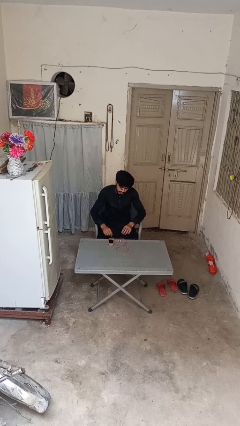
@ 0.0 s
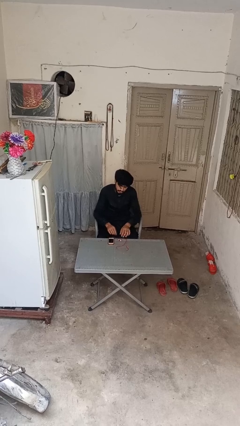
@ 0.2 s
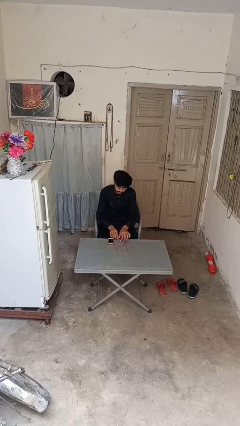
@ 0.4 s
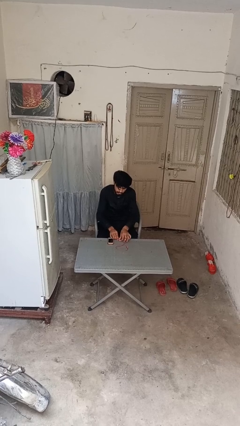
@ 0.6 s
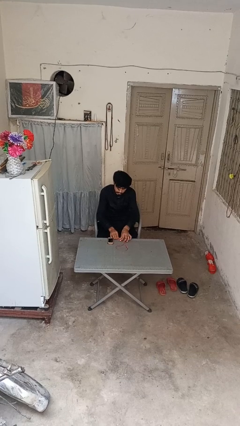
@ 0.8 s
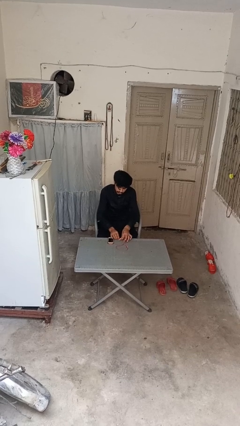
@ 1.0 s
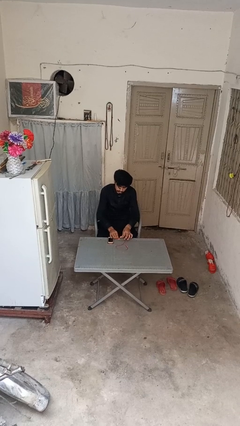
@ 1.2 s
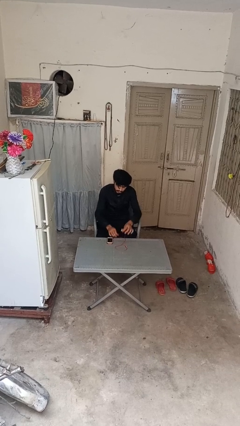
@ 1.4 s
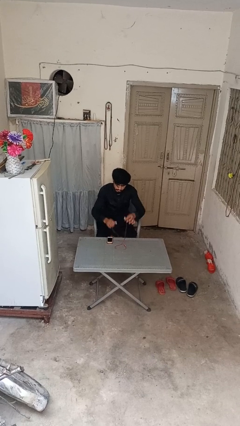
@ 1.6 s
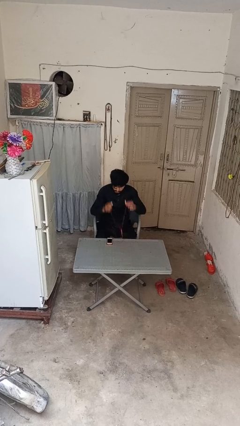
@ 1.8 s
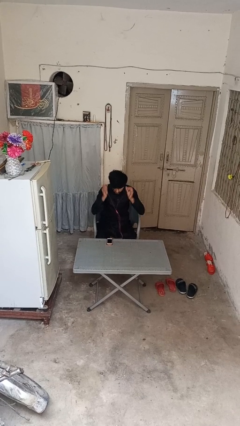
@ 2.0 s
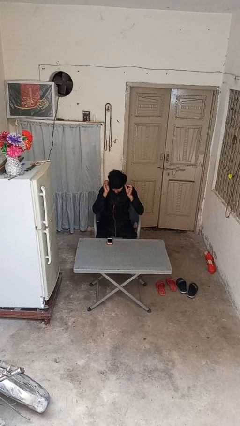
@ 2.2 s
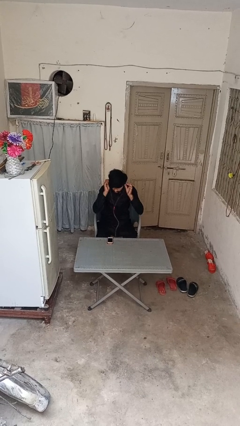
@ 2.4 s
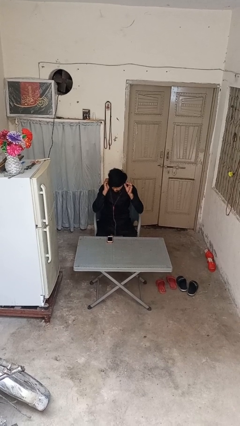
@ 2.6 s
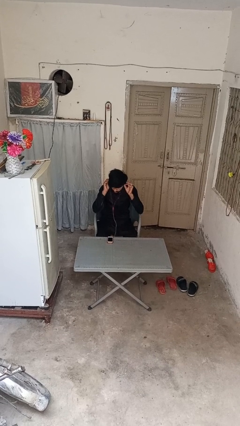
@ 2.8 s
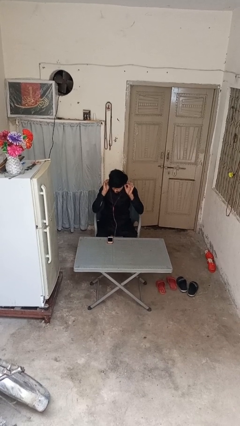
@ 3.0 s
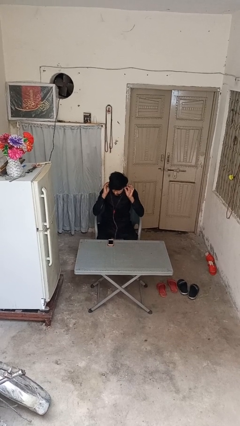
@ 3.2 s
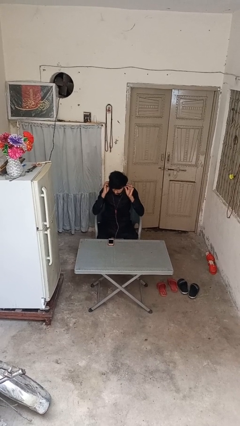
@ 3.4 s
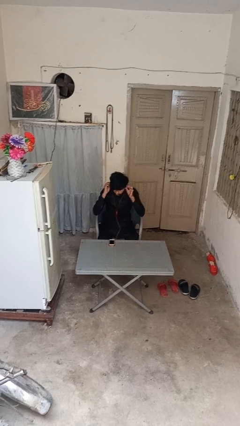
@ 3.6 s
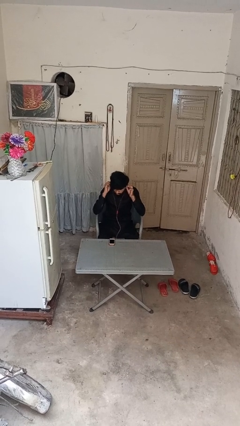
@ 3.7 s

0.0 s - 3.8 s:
person puts on headphones

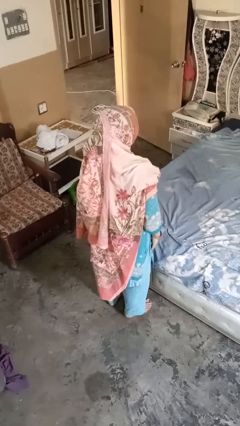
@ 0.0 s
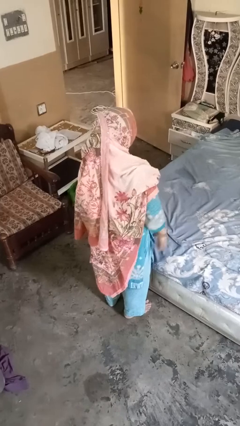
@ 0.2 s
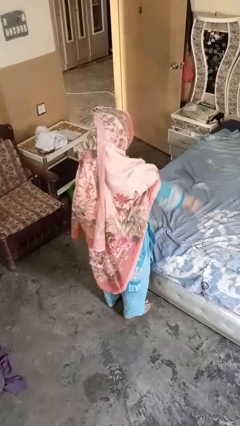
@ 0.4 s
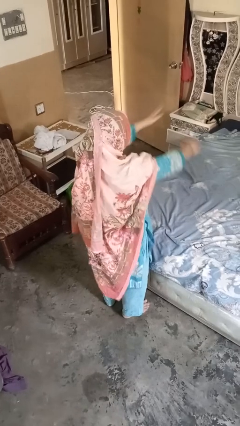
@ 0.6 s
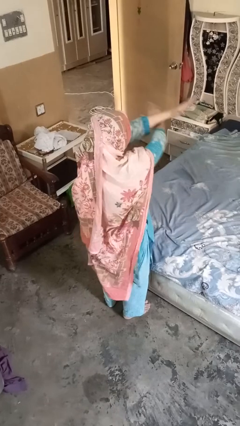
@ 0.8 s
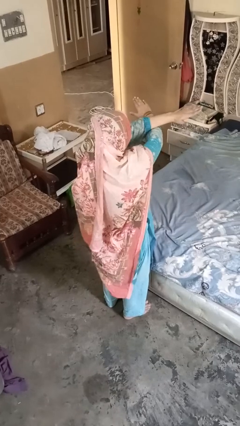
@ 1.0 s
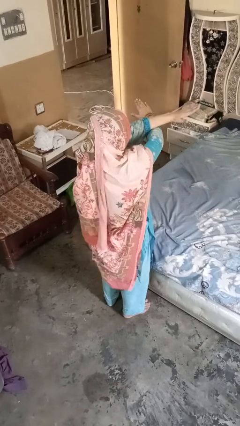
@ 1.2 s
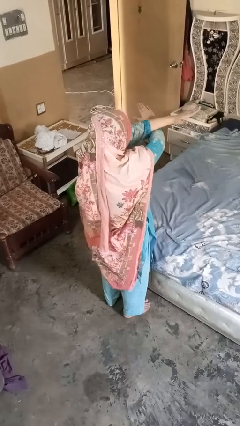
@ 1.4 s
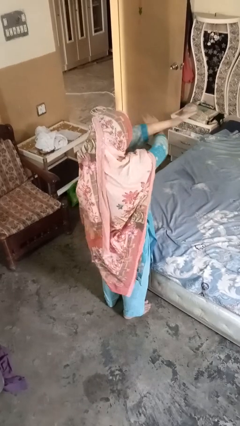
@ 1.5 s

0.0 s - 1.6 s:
person gestures arms x

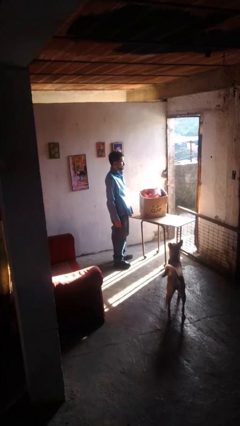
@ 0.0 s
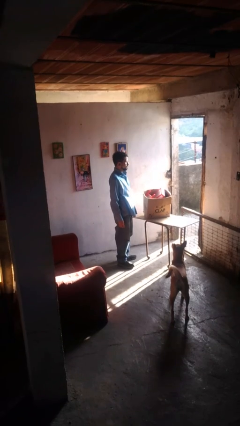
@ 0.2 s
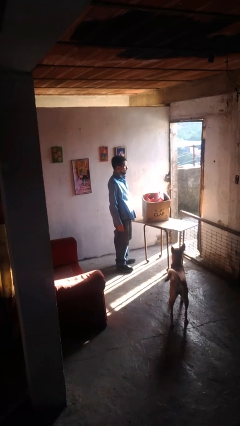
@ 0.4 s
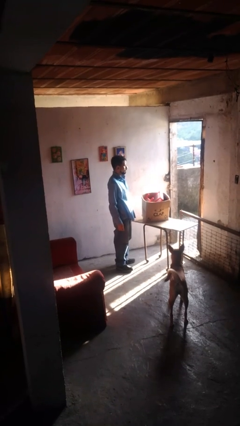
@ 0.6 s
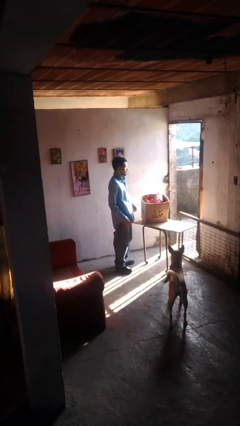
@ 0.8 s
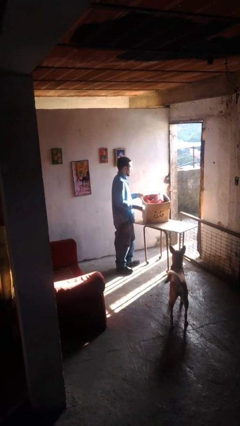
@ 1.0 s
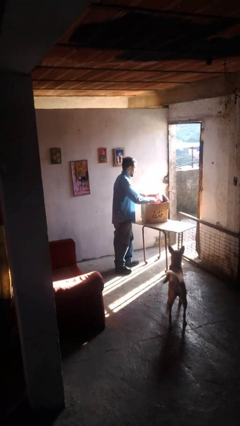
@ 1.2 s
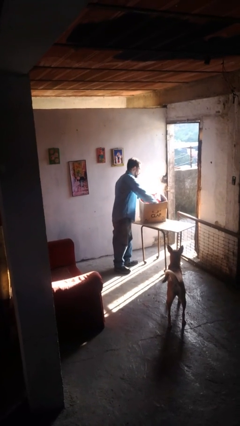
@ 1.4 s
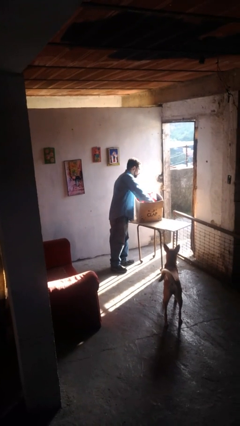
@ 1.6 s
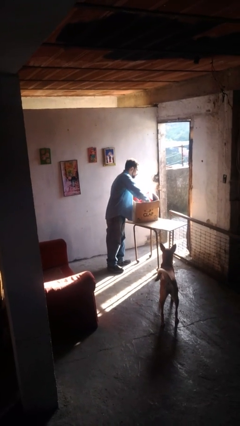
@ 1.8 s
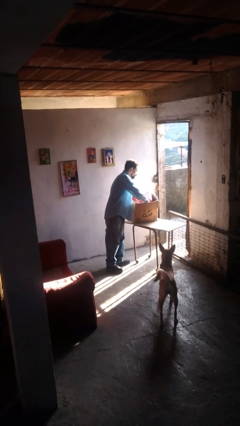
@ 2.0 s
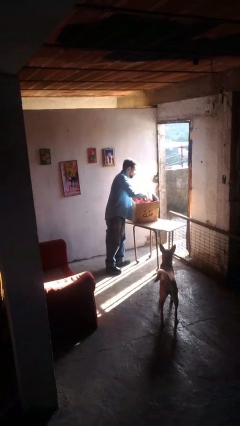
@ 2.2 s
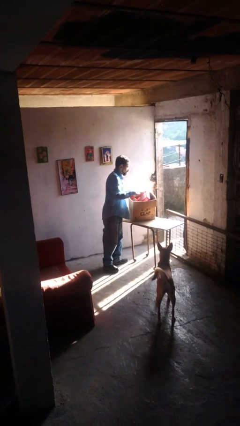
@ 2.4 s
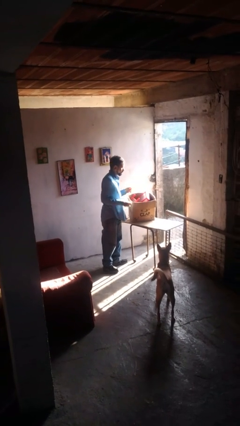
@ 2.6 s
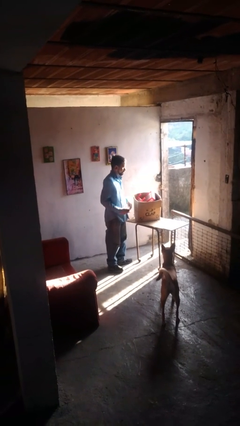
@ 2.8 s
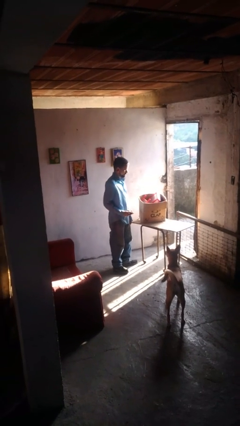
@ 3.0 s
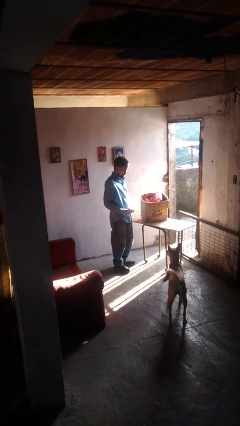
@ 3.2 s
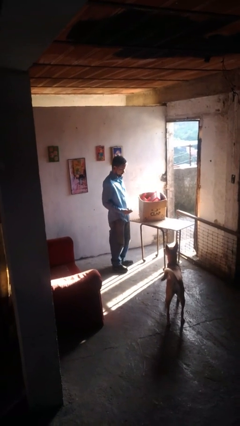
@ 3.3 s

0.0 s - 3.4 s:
person takes object from box

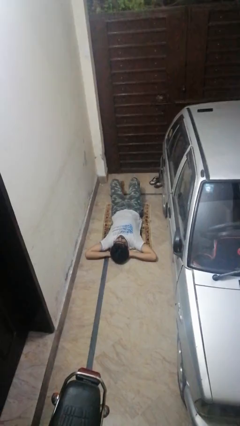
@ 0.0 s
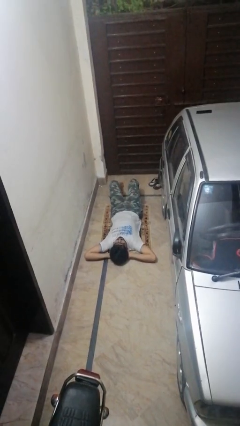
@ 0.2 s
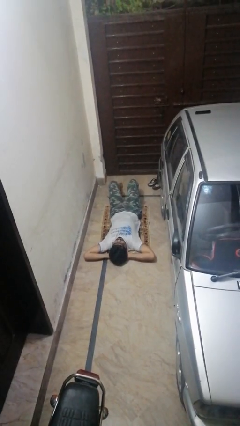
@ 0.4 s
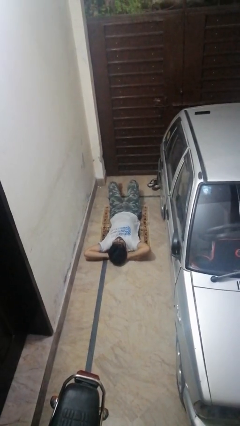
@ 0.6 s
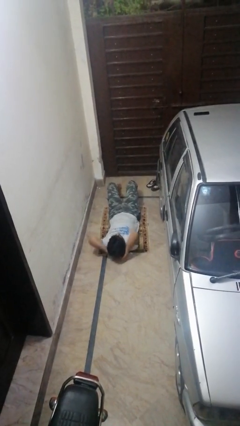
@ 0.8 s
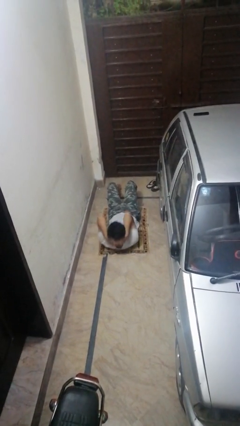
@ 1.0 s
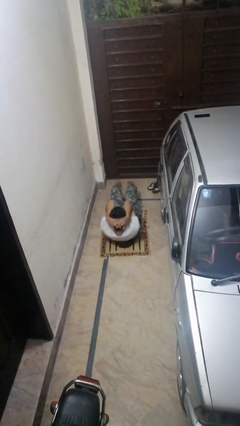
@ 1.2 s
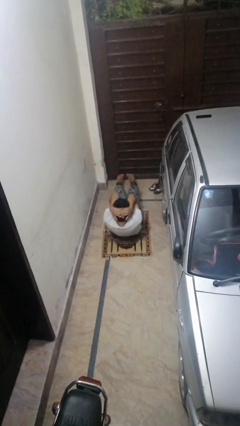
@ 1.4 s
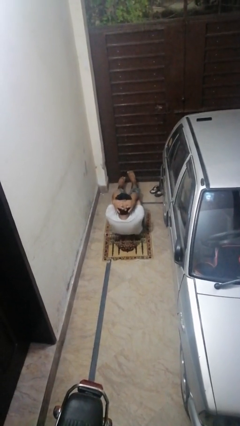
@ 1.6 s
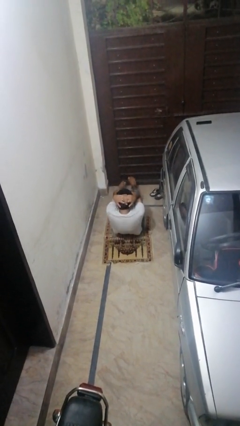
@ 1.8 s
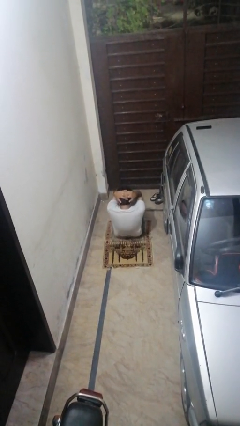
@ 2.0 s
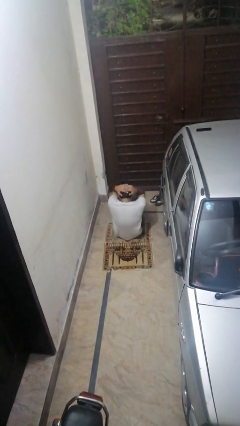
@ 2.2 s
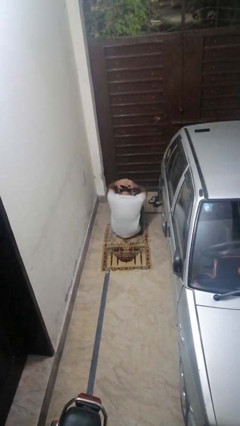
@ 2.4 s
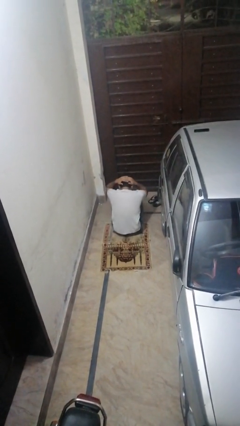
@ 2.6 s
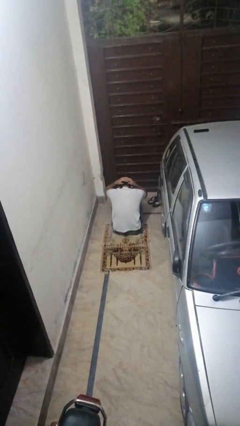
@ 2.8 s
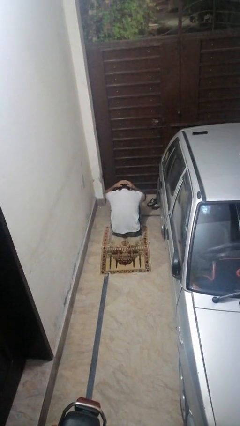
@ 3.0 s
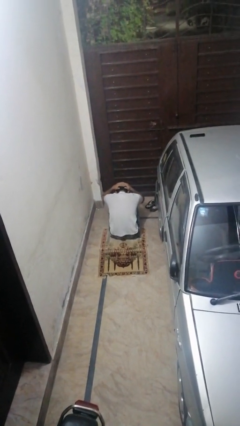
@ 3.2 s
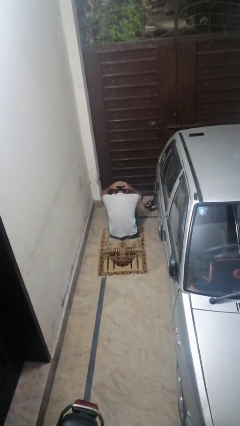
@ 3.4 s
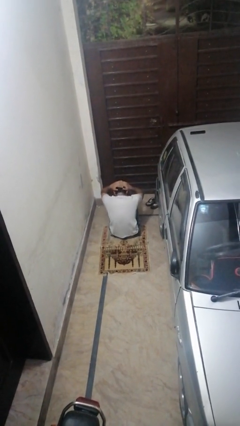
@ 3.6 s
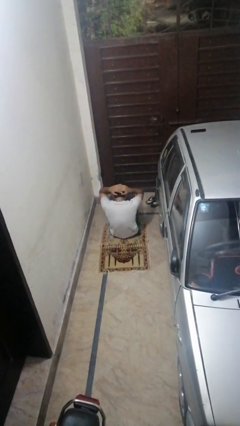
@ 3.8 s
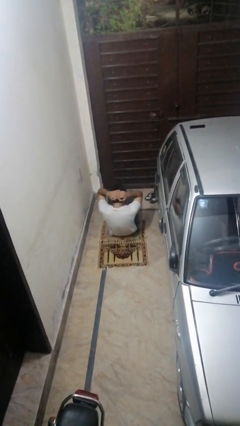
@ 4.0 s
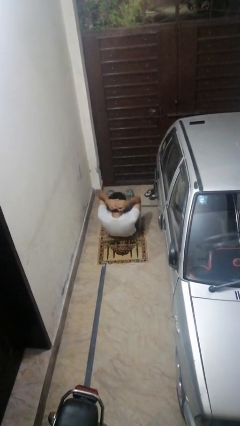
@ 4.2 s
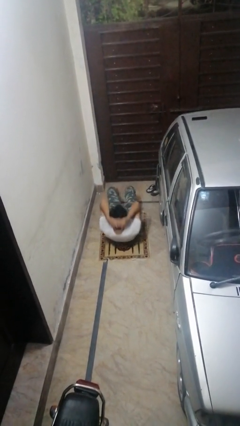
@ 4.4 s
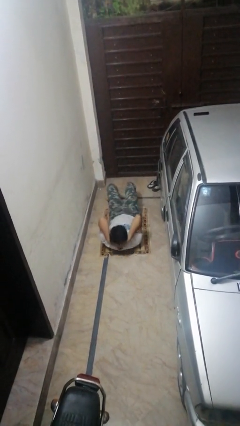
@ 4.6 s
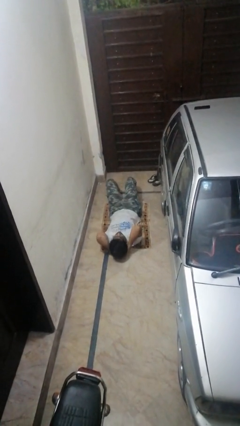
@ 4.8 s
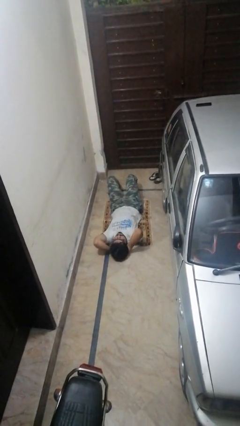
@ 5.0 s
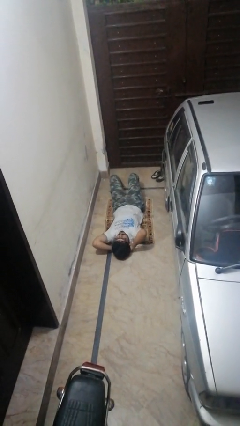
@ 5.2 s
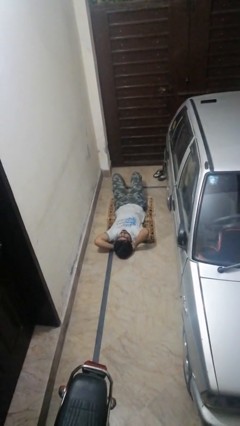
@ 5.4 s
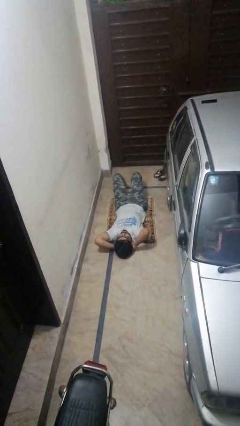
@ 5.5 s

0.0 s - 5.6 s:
person exercises with situp

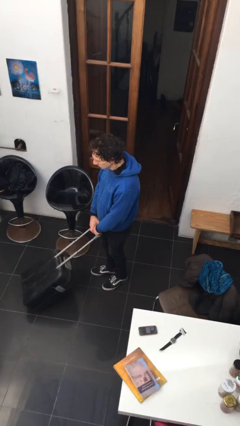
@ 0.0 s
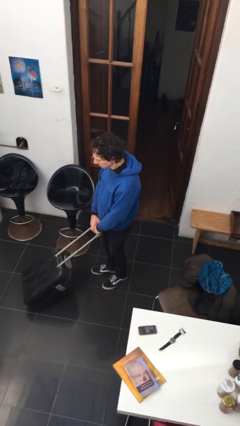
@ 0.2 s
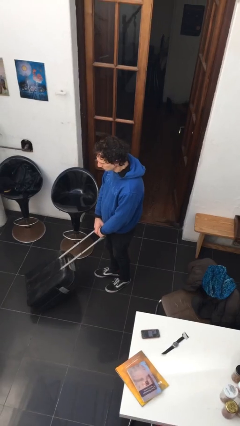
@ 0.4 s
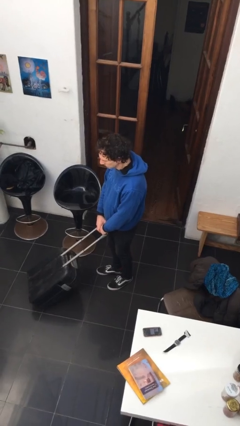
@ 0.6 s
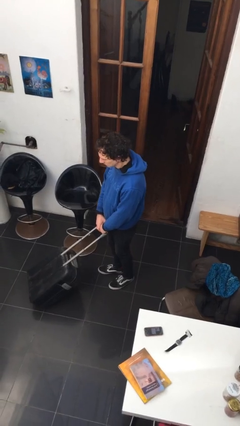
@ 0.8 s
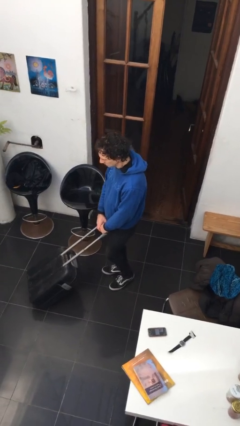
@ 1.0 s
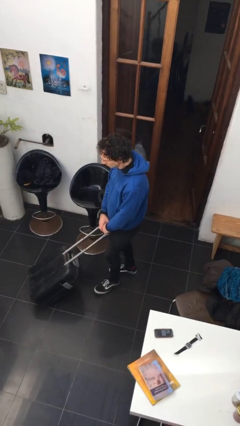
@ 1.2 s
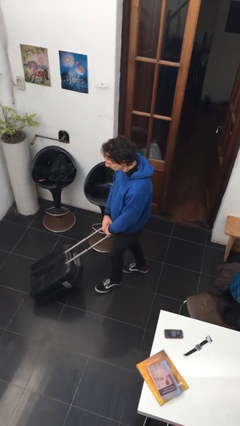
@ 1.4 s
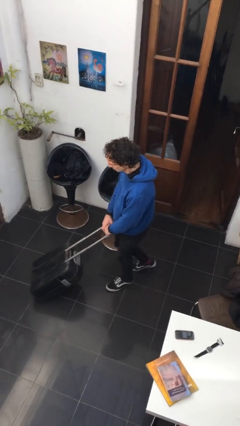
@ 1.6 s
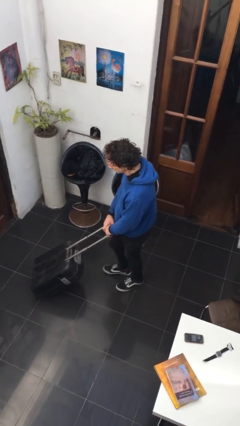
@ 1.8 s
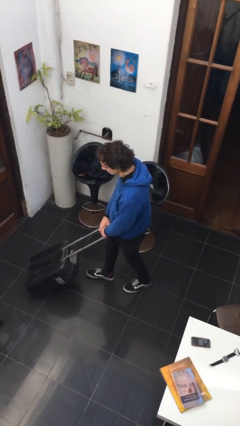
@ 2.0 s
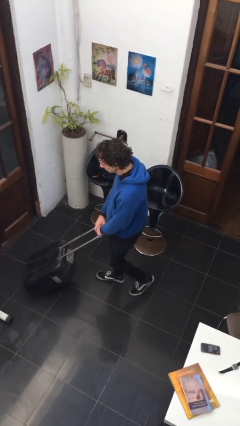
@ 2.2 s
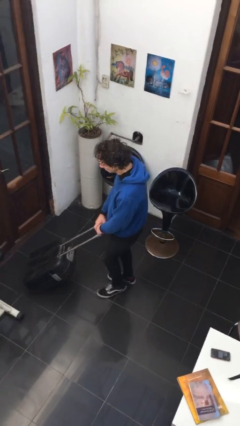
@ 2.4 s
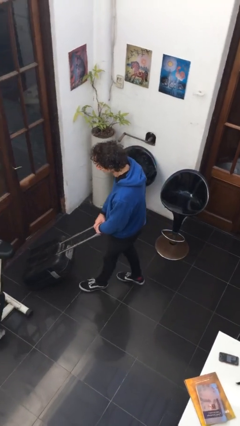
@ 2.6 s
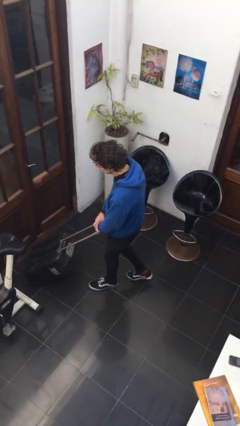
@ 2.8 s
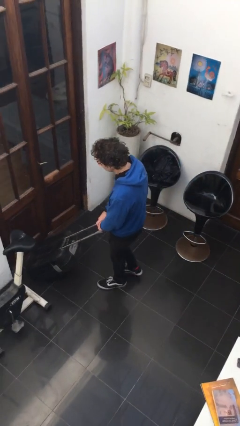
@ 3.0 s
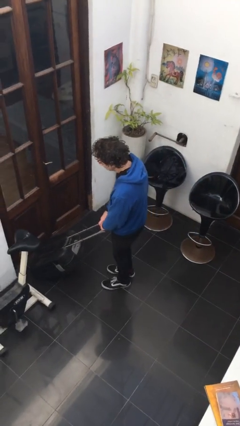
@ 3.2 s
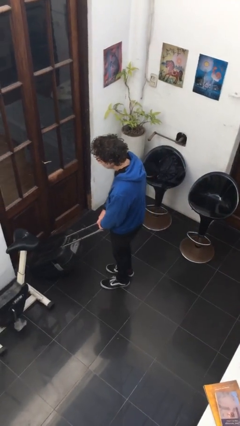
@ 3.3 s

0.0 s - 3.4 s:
person pushes wheeled cart
